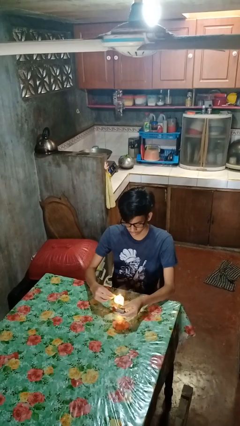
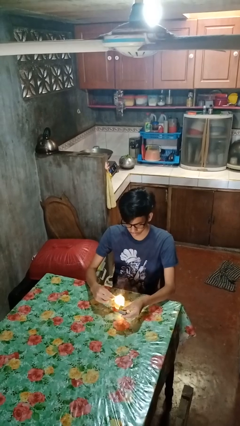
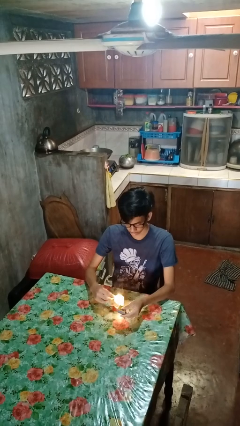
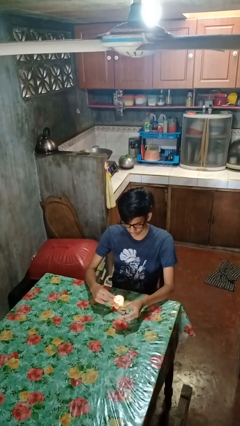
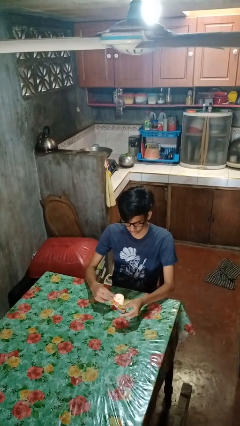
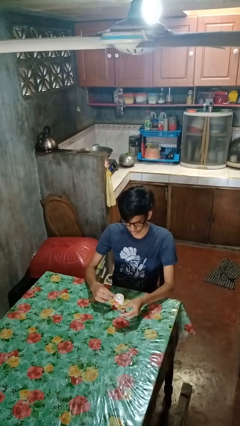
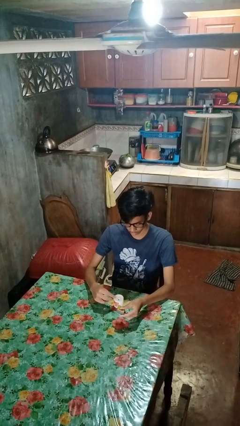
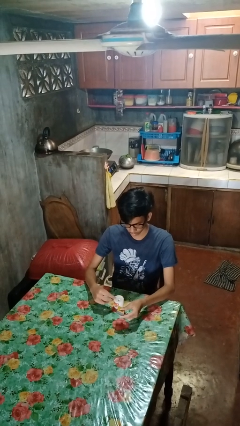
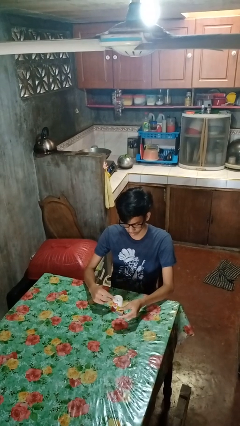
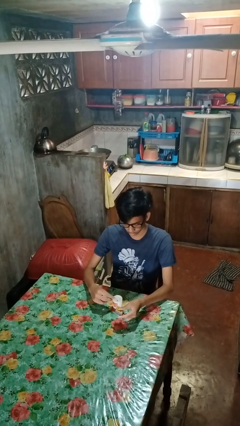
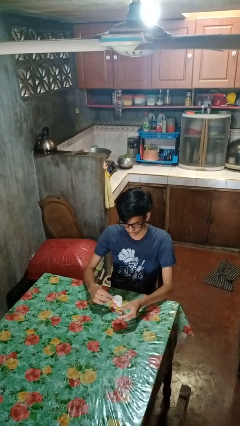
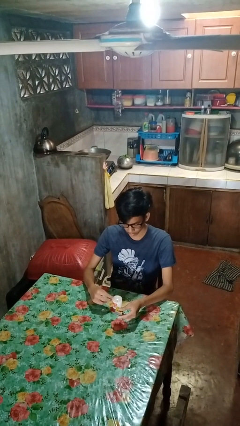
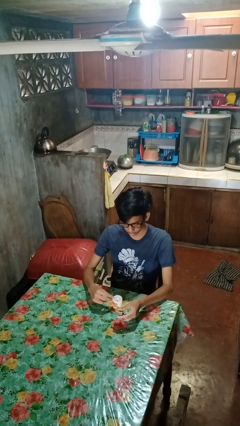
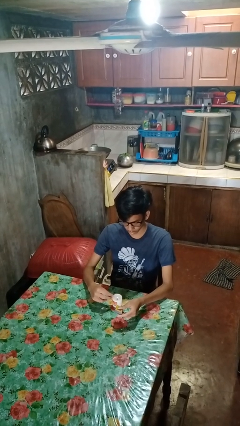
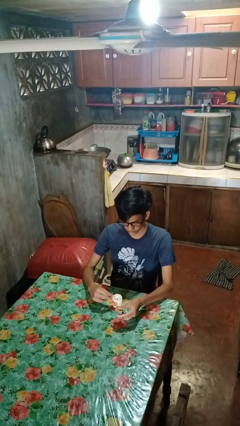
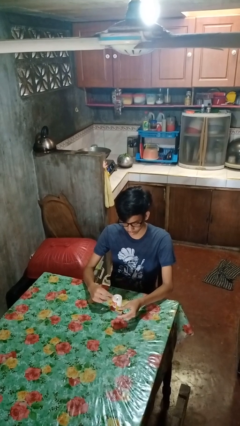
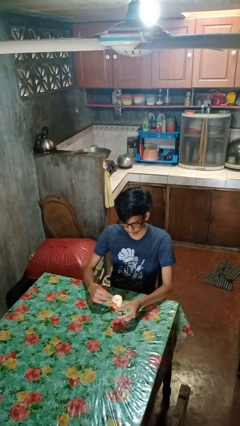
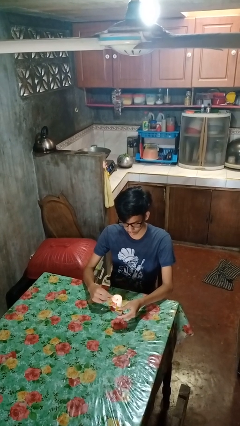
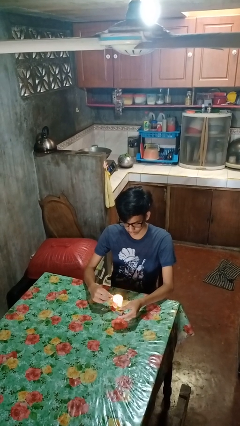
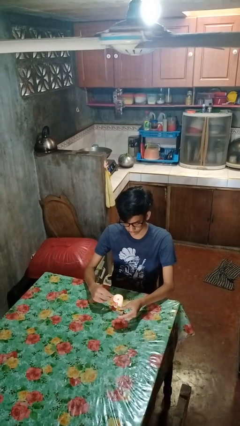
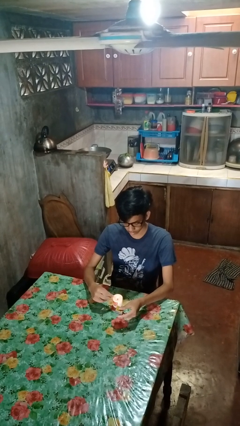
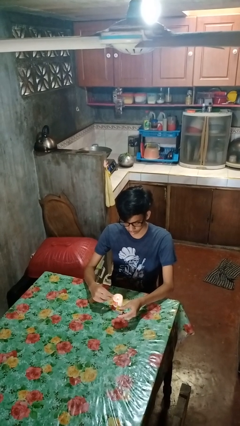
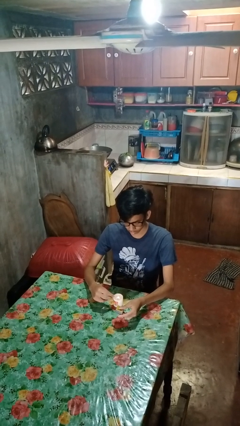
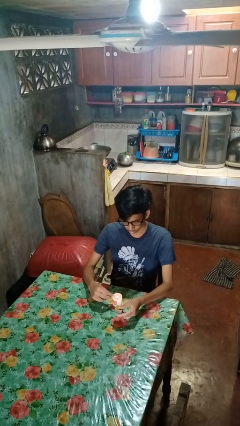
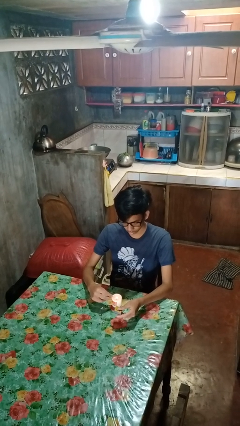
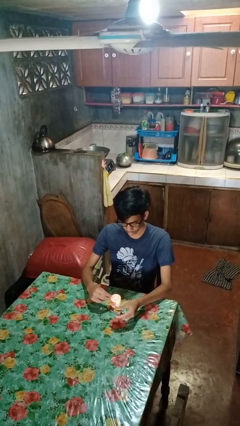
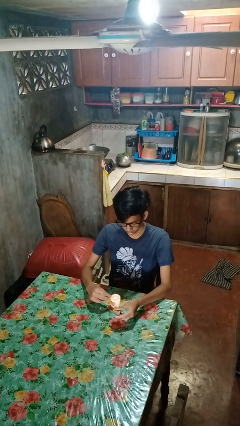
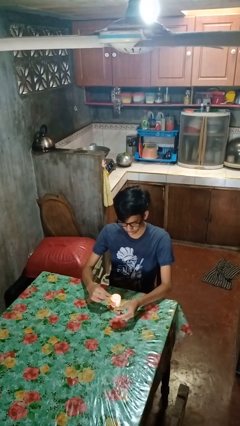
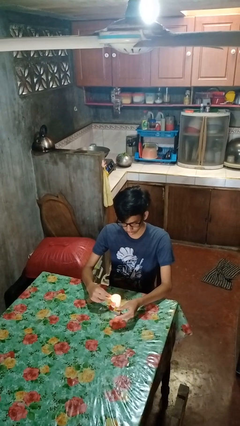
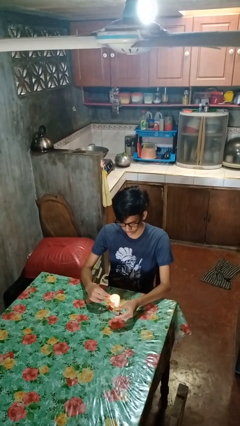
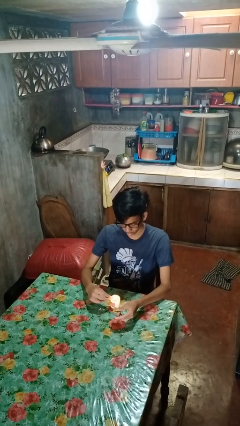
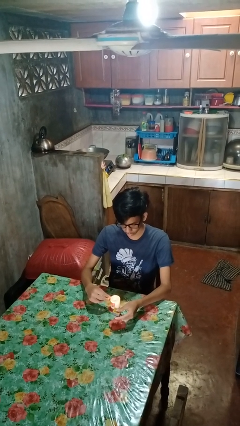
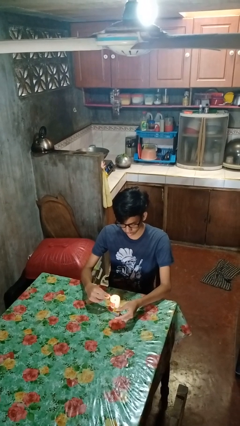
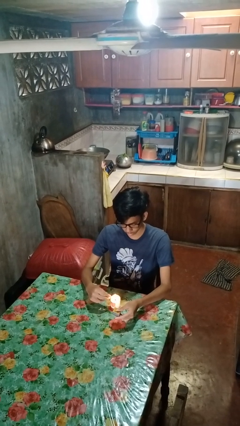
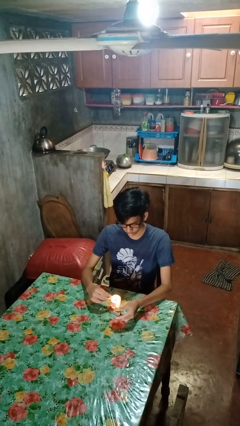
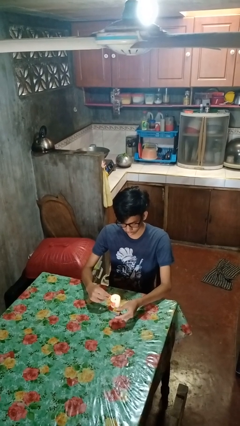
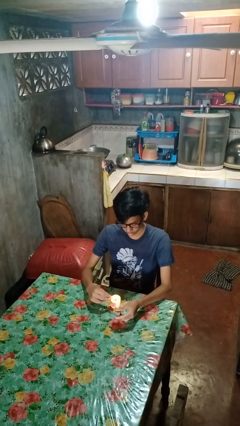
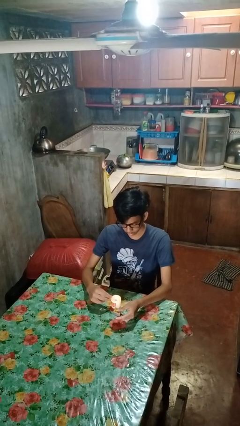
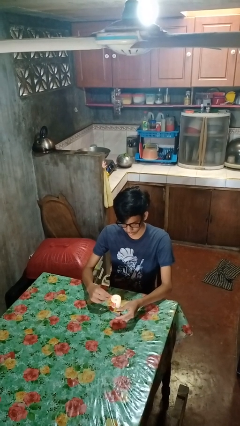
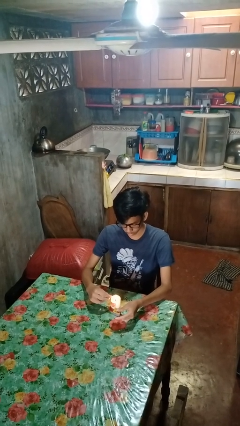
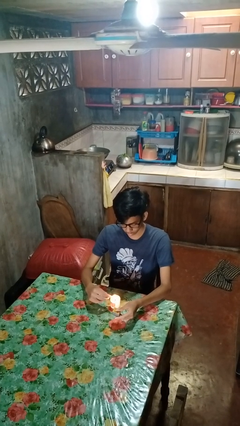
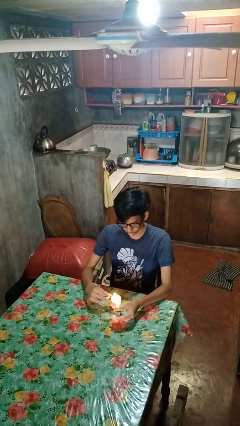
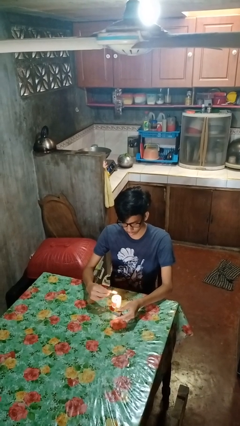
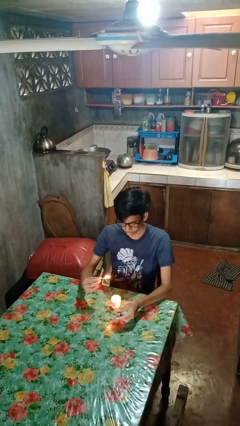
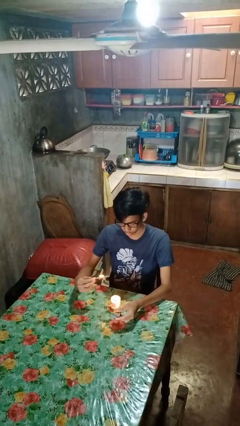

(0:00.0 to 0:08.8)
person lights candle

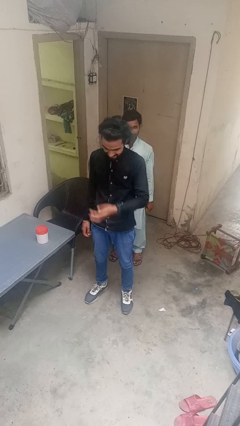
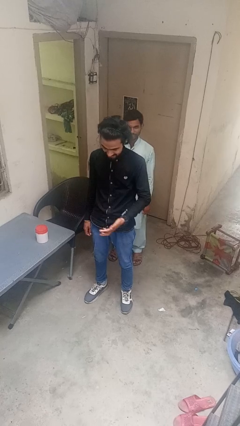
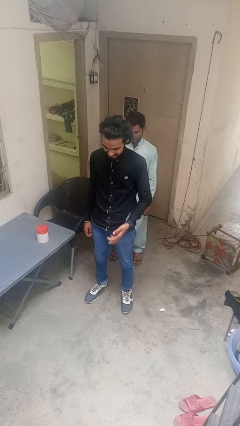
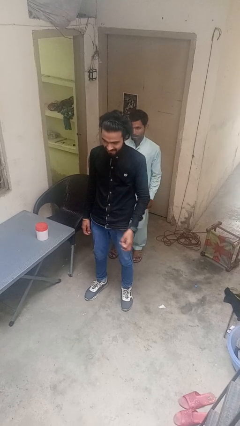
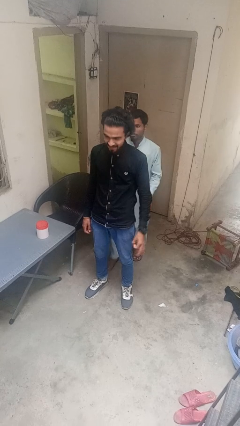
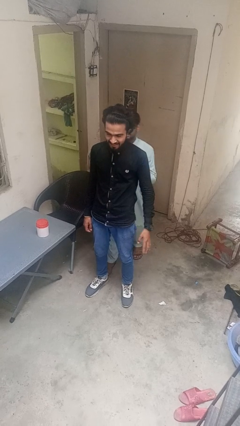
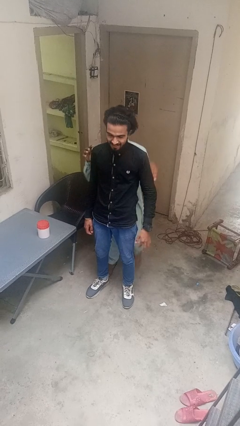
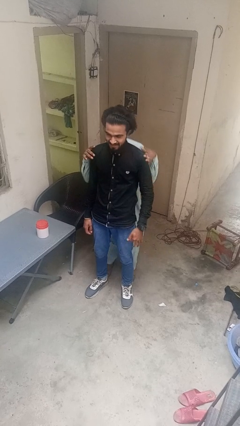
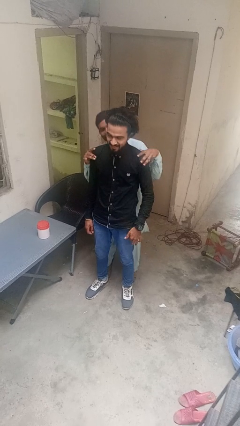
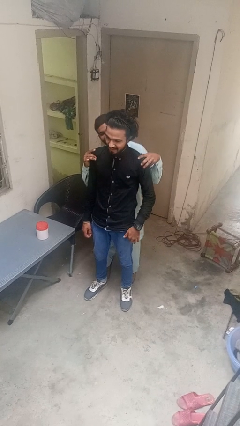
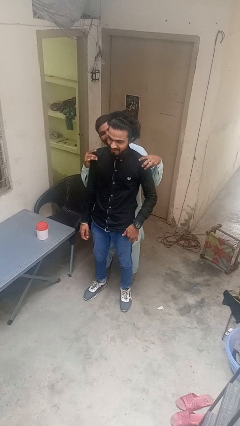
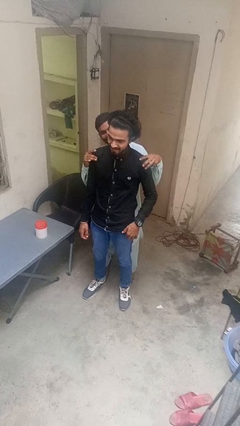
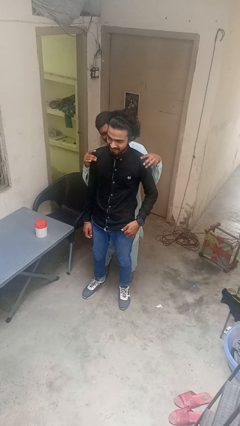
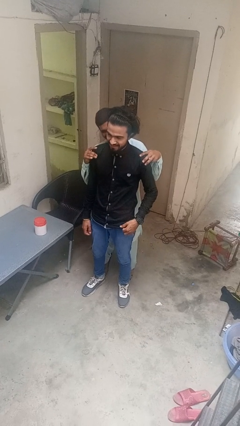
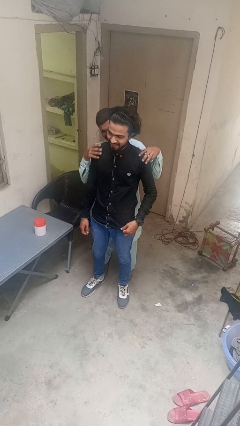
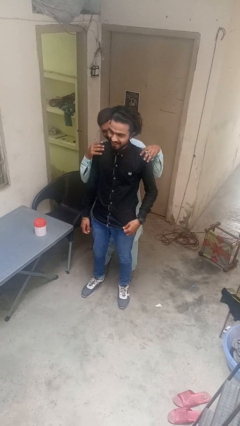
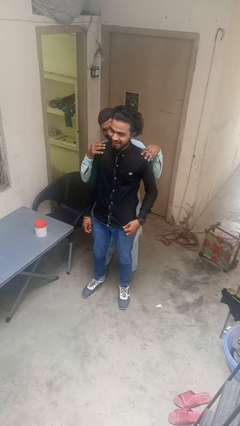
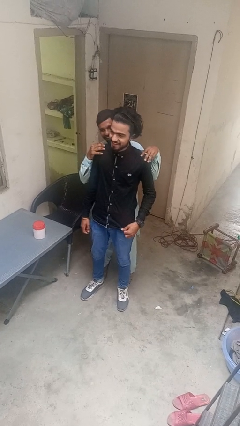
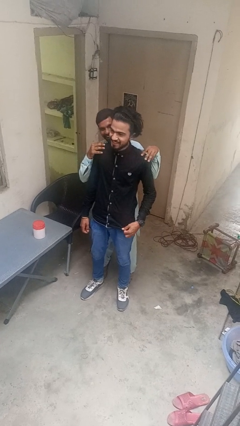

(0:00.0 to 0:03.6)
person looks over shoulder

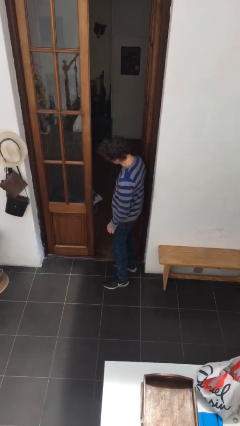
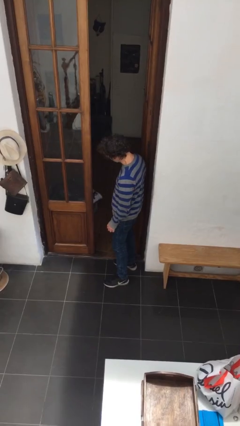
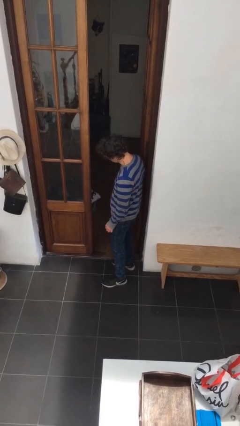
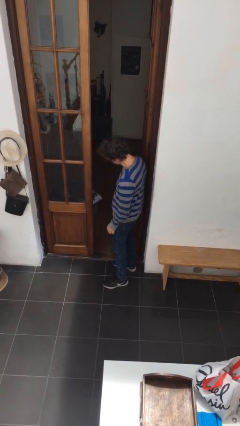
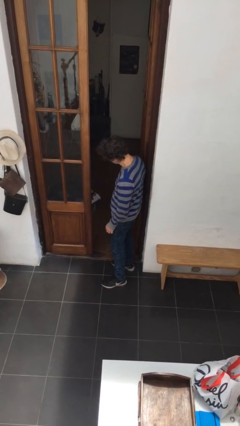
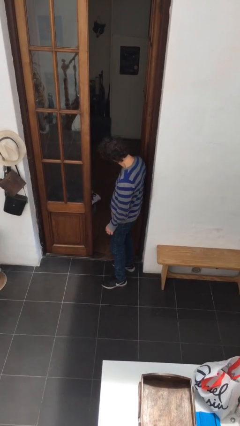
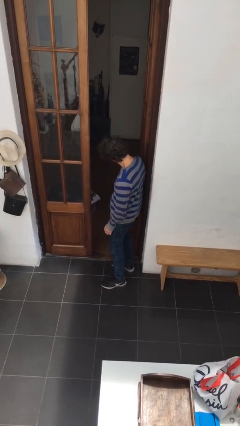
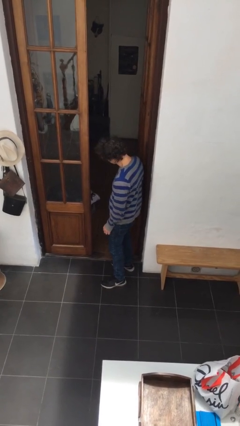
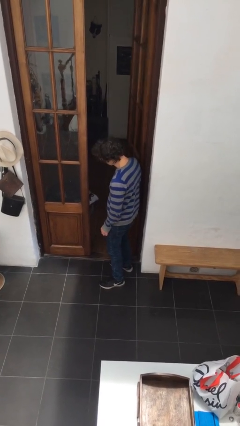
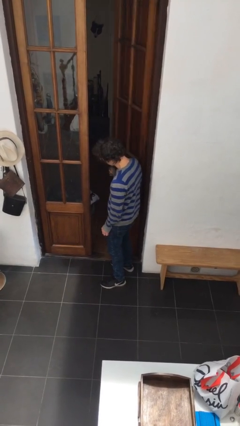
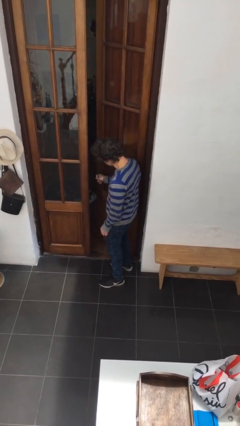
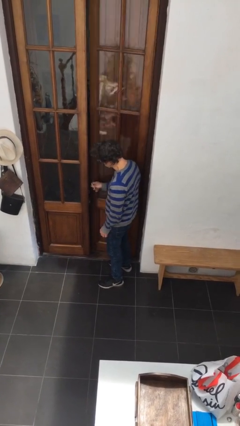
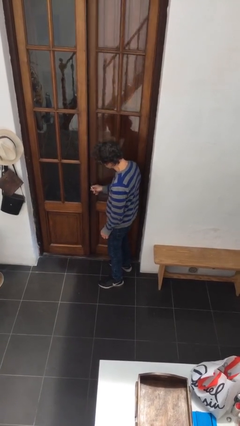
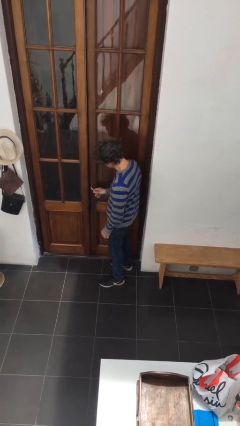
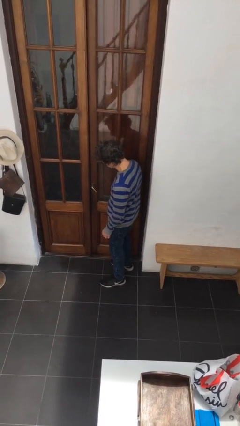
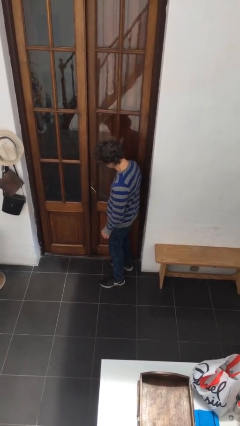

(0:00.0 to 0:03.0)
person closes facility door

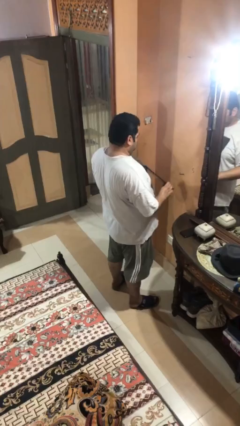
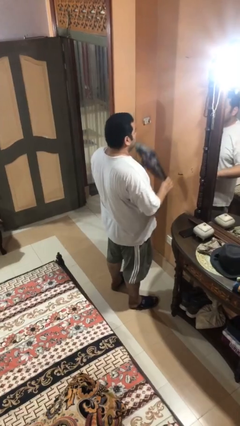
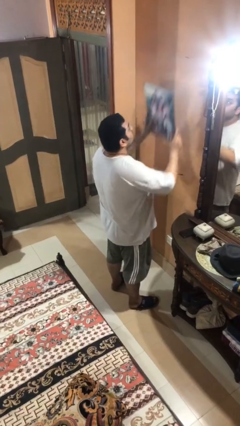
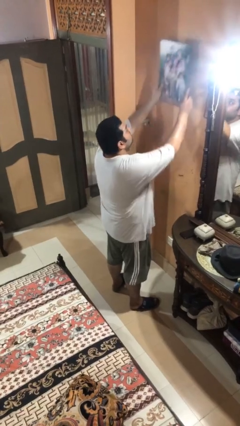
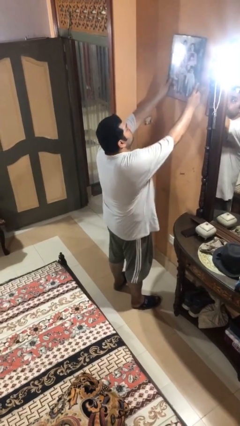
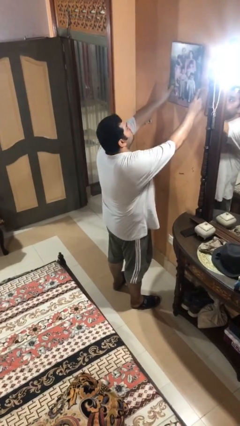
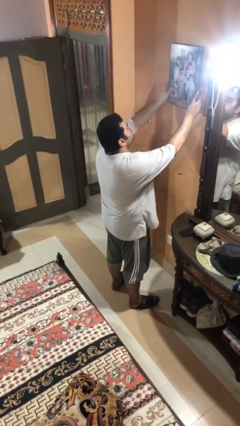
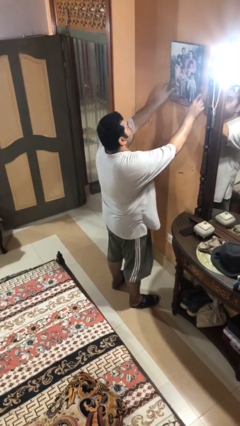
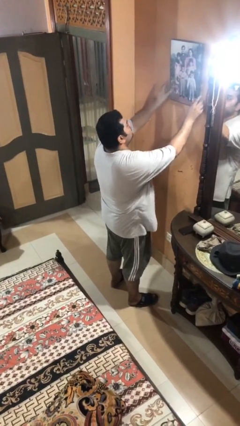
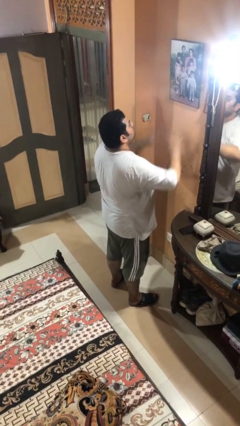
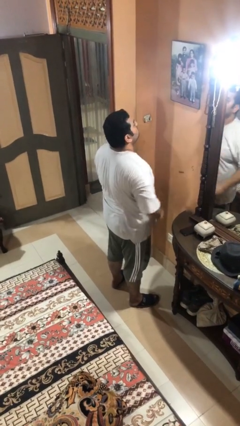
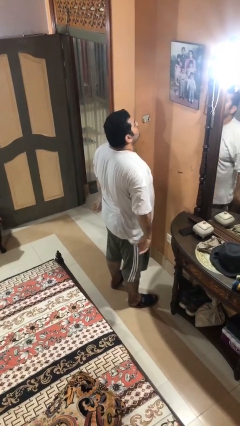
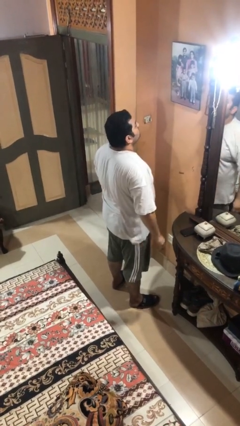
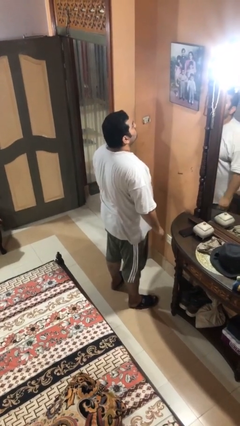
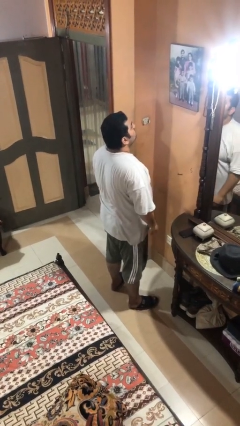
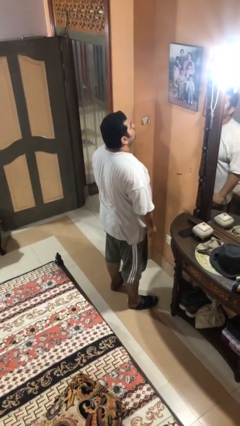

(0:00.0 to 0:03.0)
person puts up picture frame
